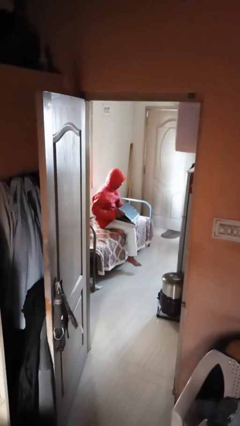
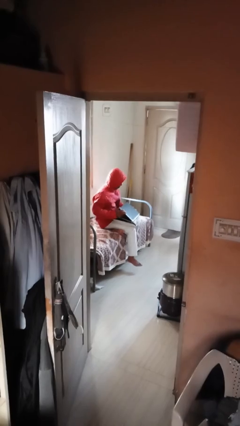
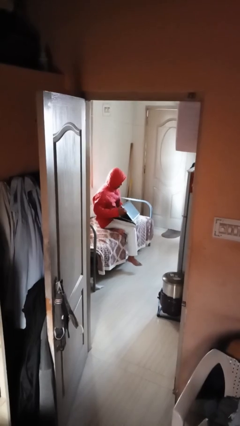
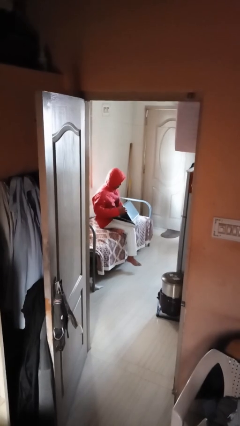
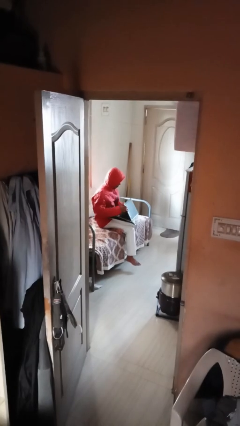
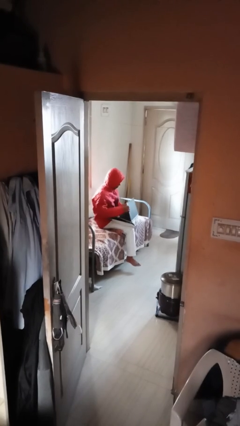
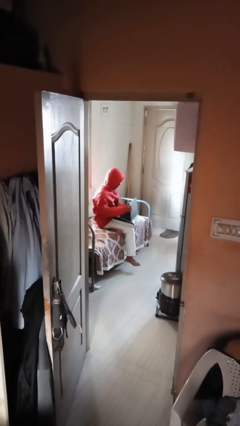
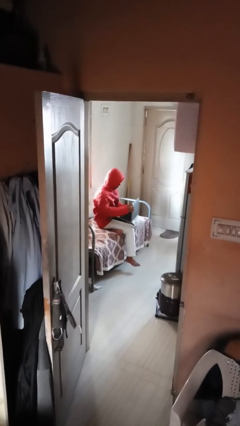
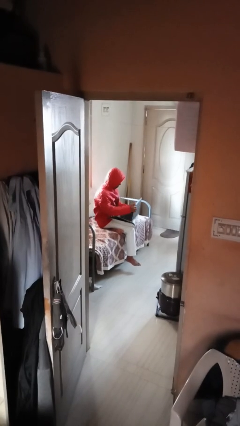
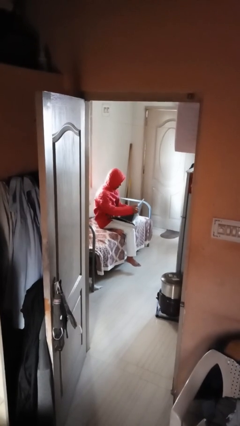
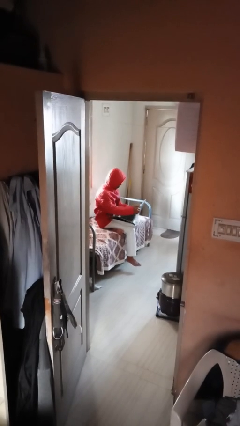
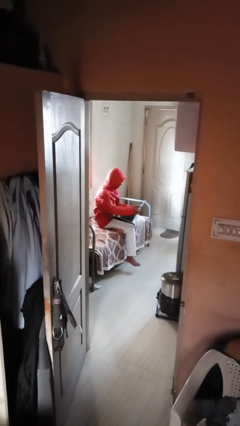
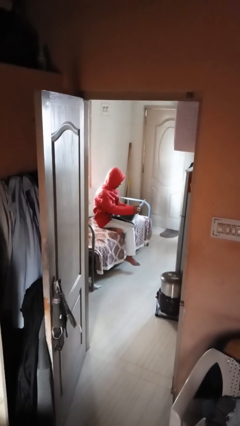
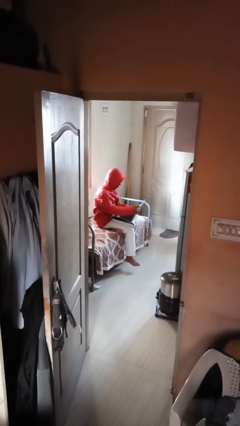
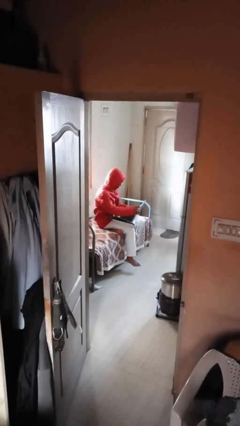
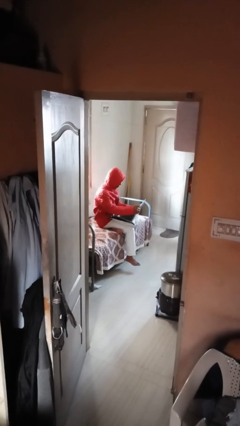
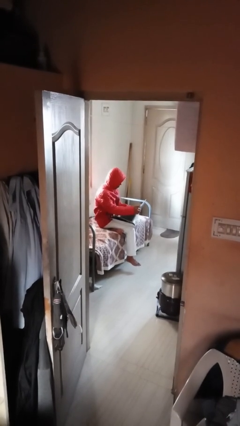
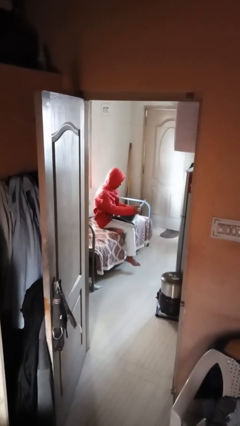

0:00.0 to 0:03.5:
person interacts with laptop

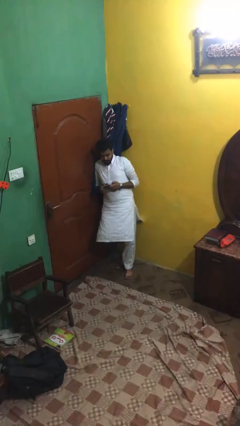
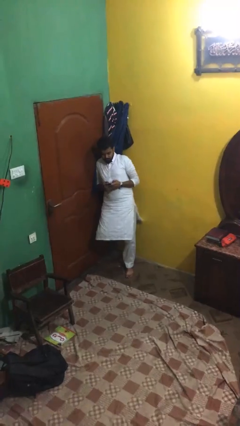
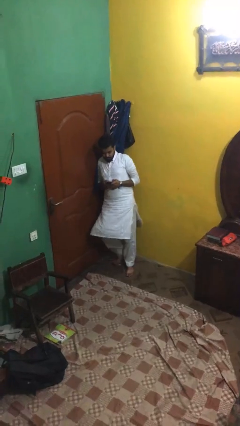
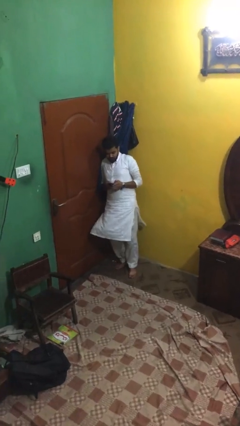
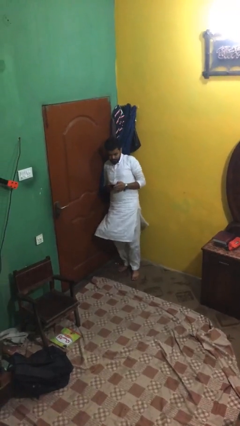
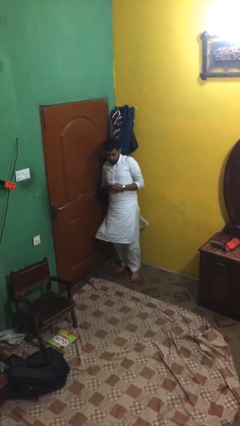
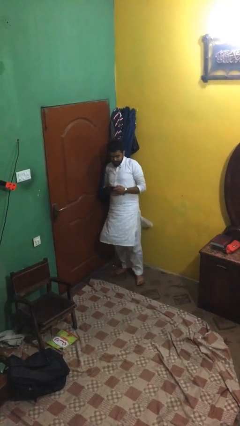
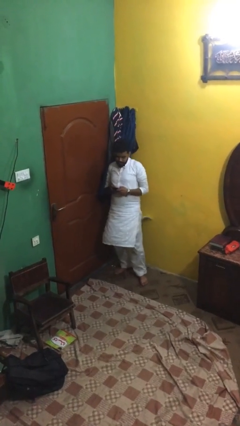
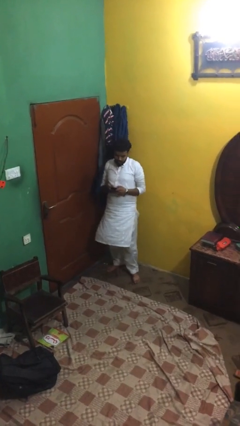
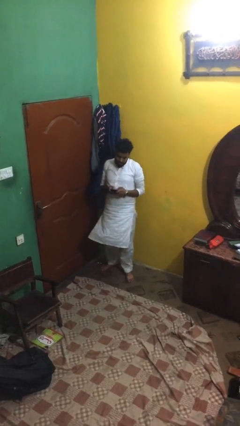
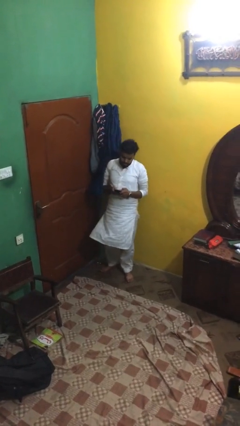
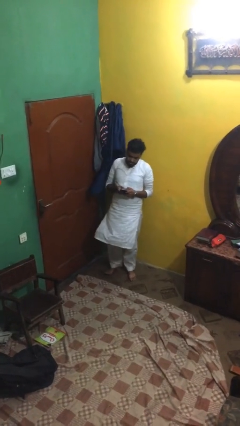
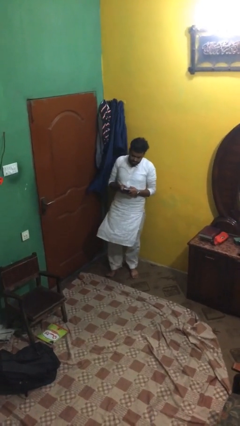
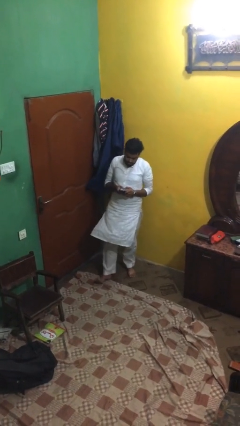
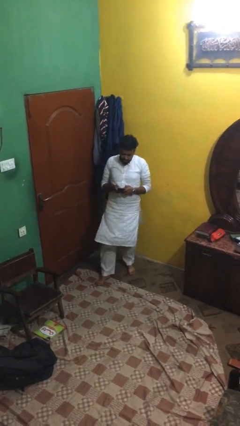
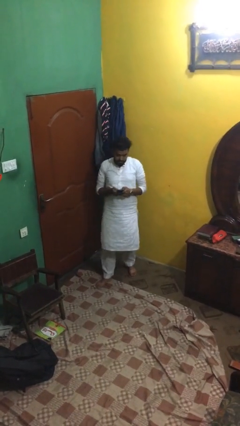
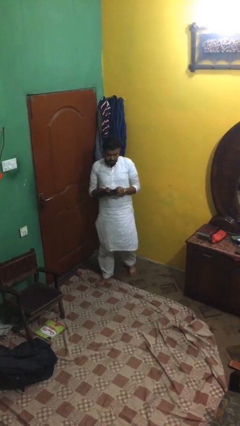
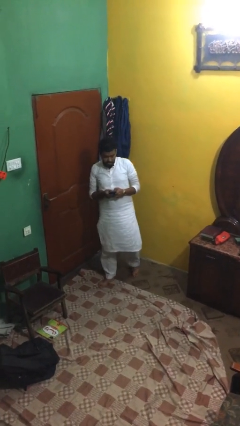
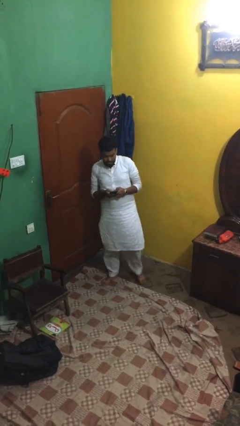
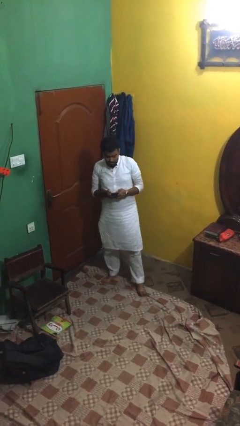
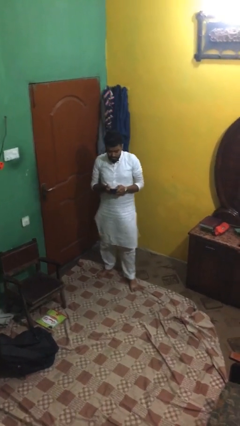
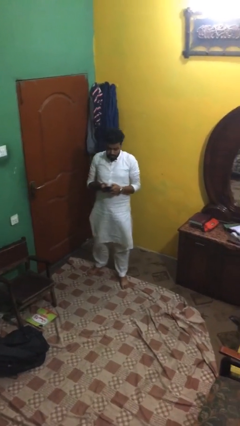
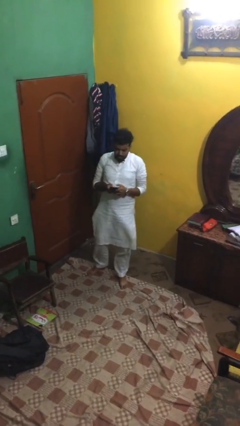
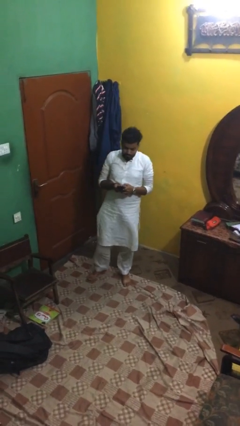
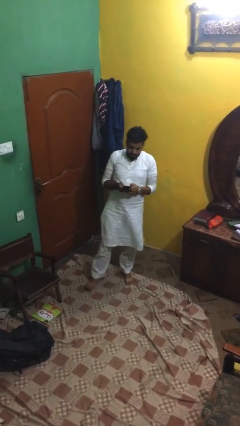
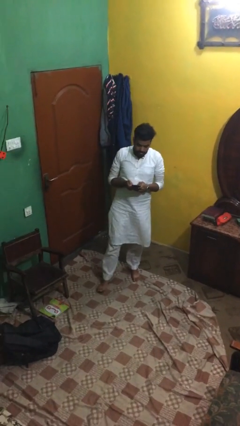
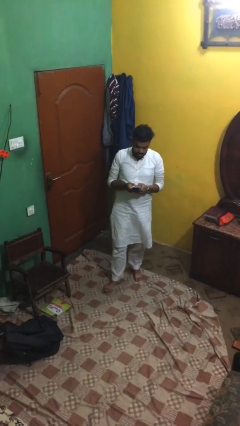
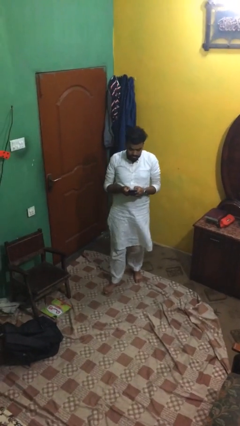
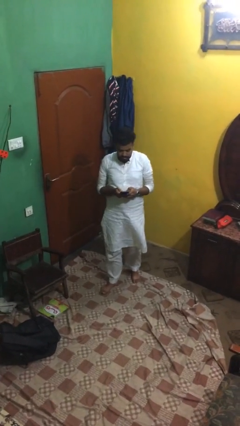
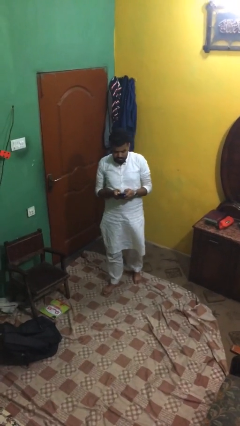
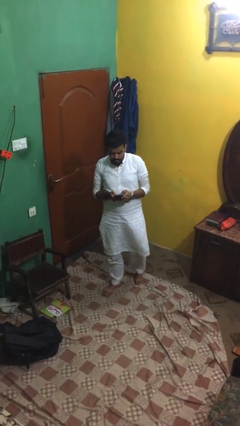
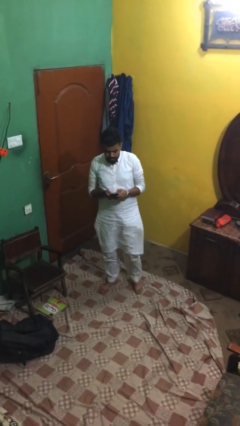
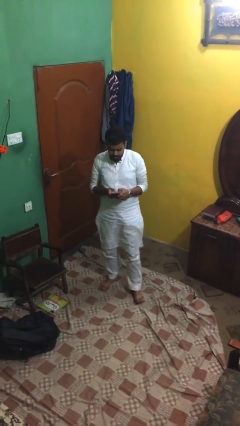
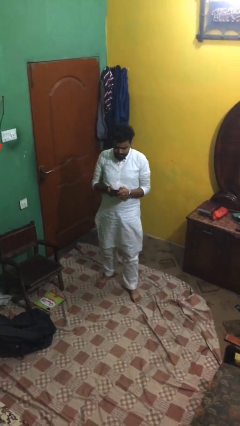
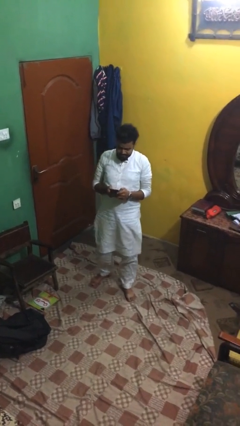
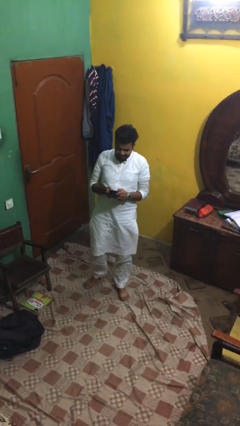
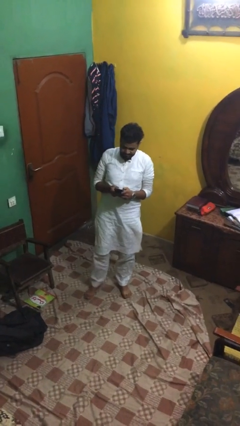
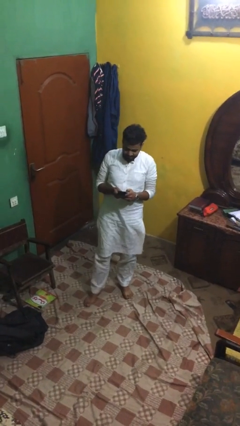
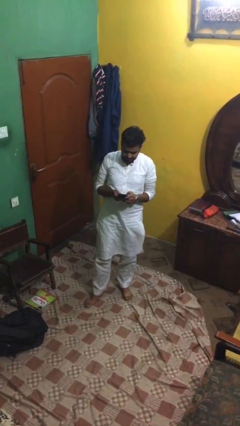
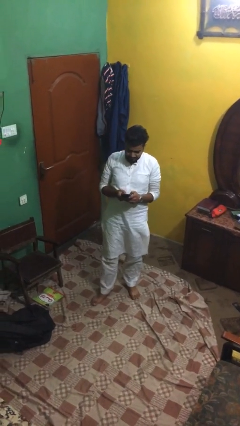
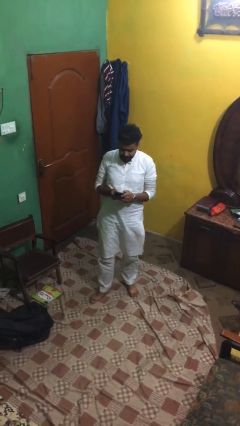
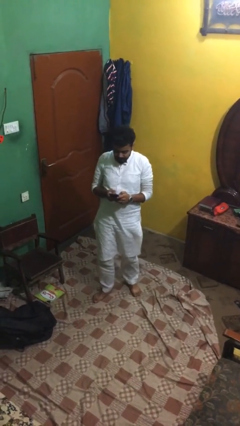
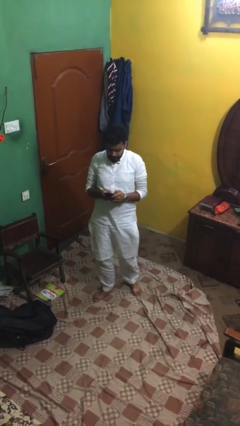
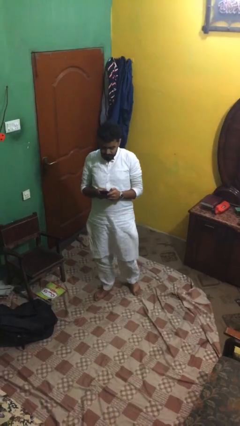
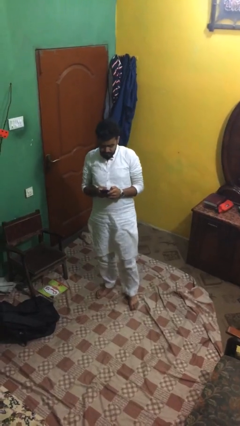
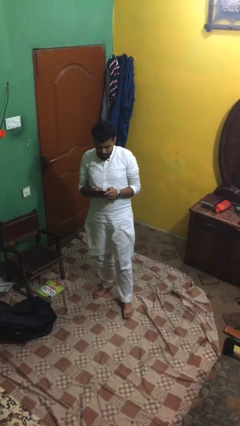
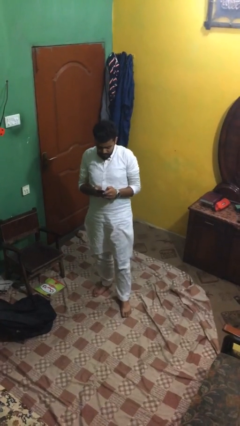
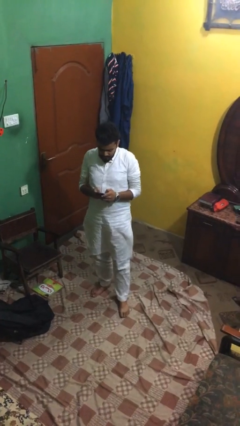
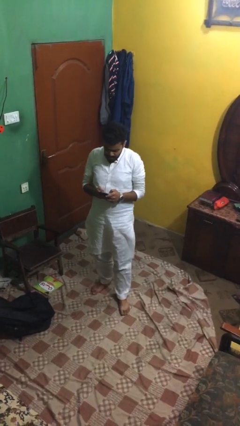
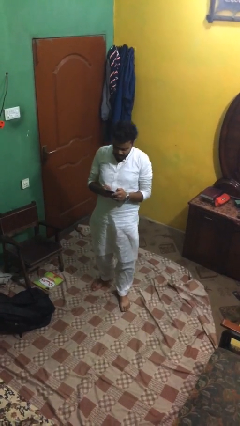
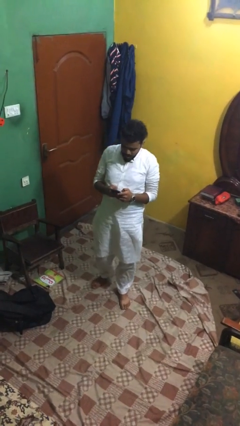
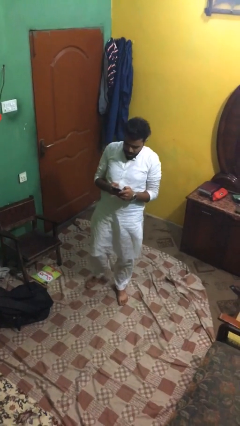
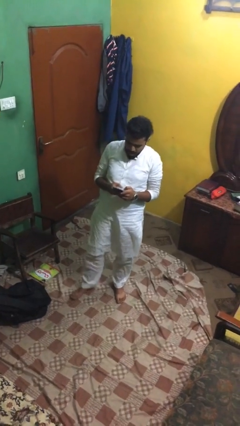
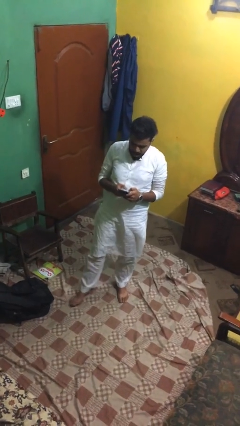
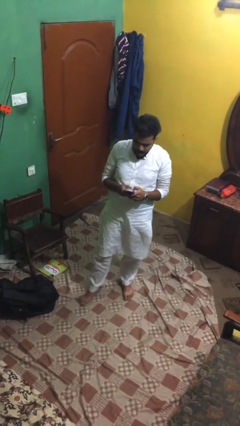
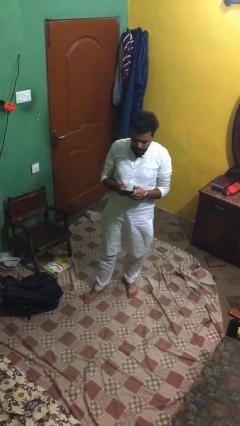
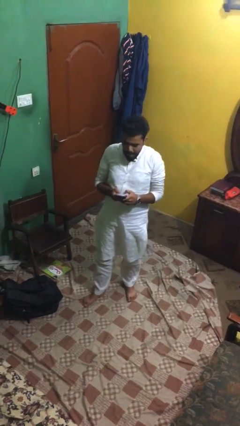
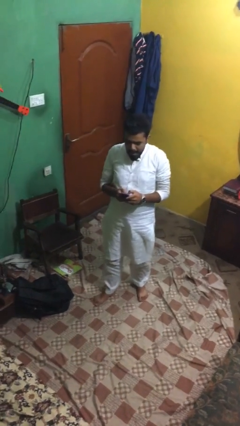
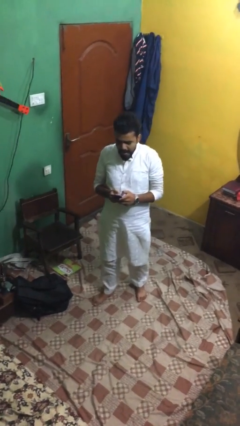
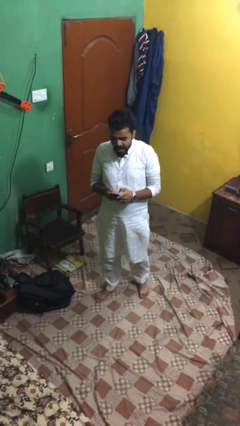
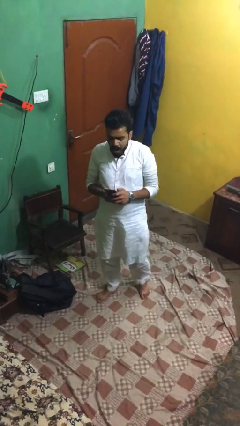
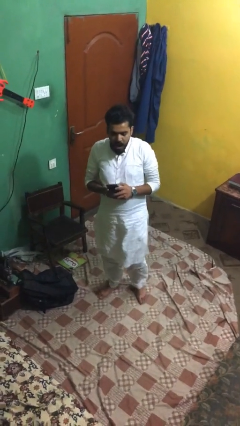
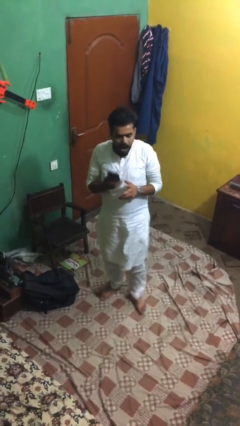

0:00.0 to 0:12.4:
person texts on phone

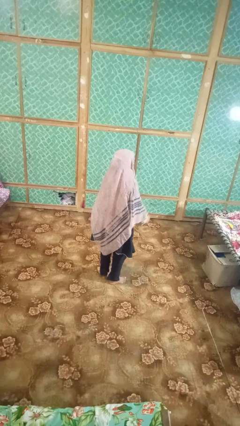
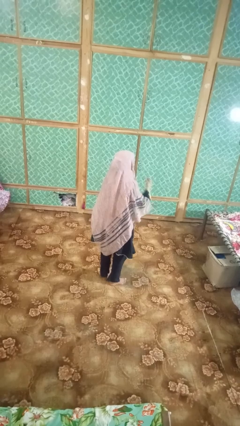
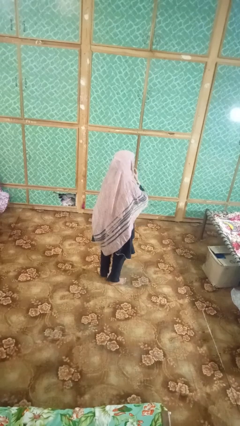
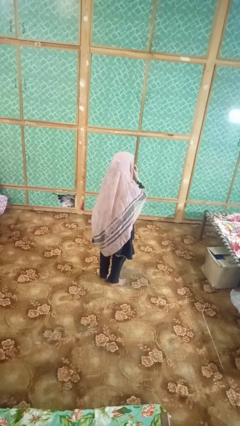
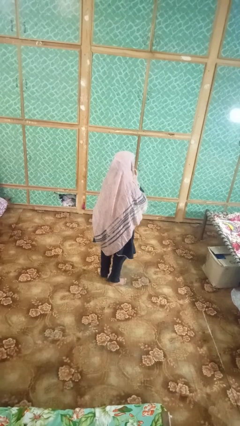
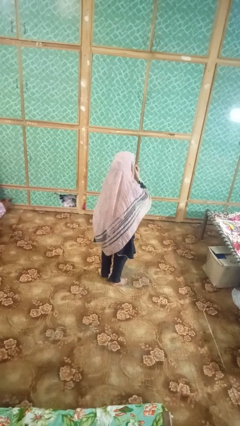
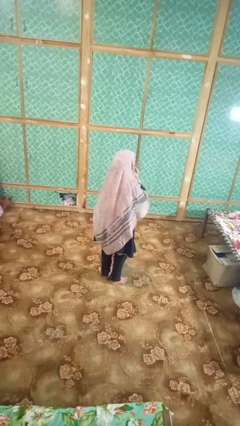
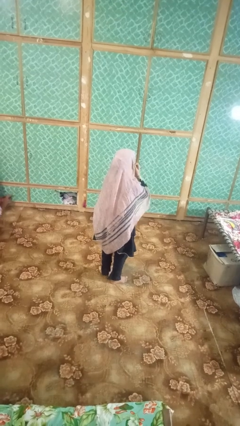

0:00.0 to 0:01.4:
person strokes chin

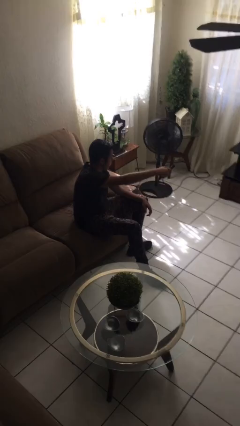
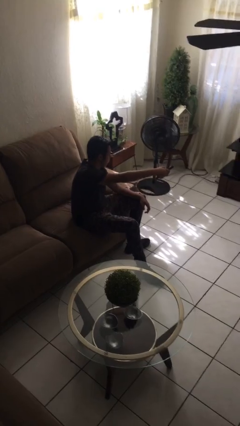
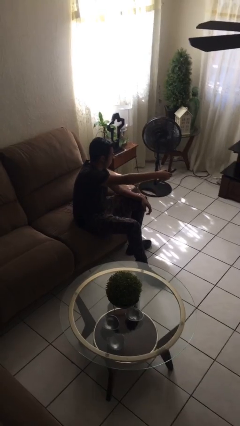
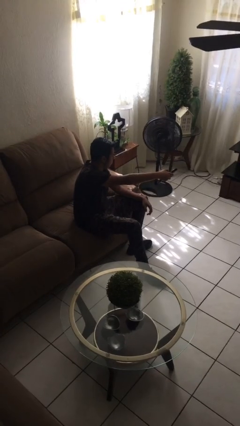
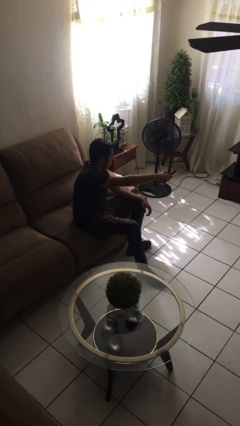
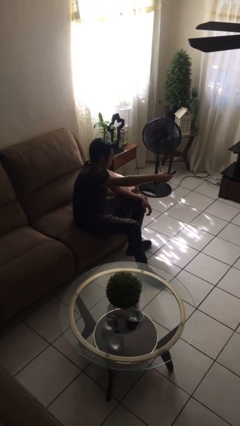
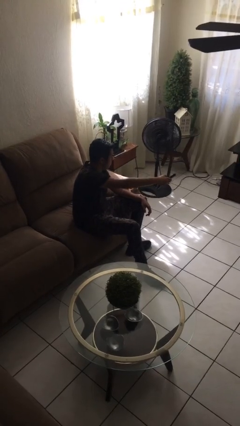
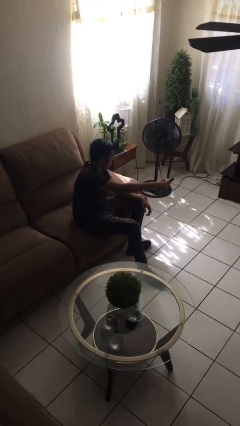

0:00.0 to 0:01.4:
person uses television remote
